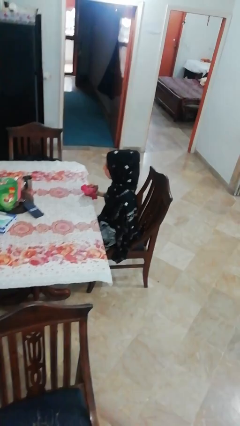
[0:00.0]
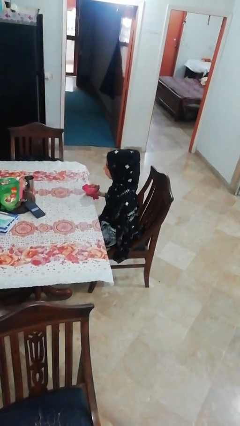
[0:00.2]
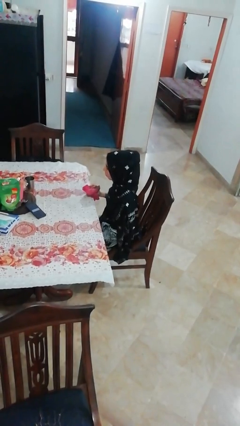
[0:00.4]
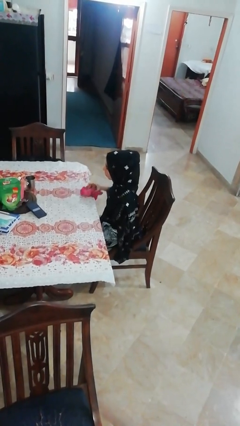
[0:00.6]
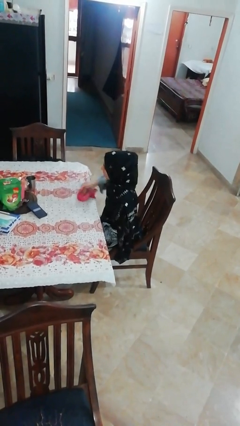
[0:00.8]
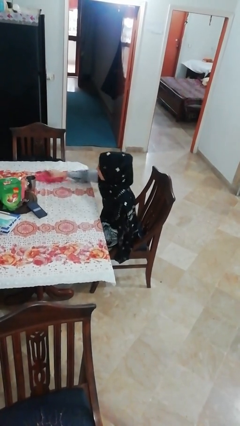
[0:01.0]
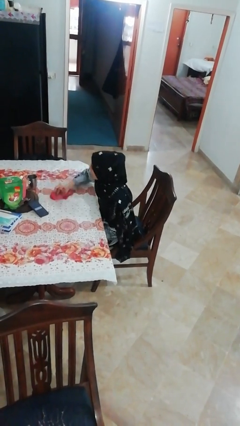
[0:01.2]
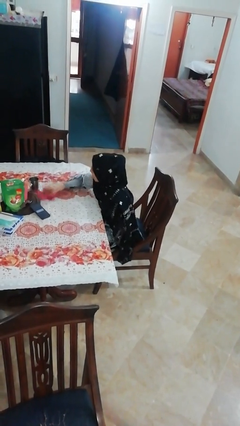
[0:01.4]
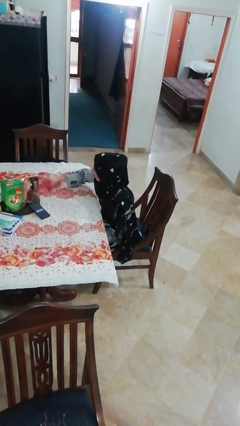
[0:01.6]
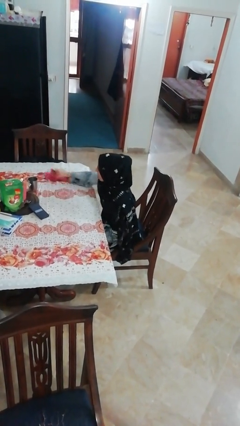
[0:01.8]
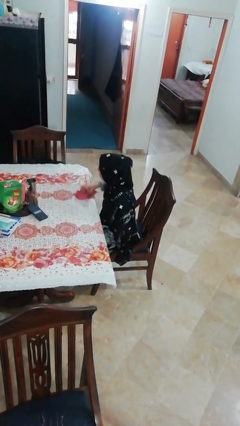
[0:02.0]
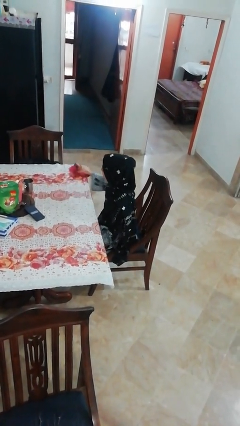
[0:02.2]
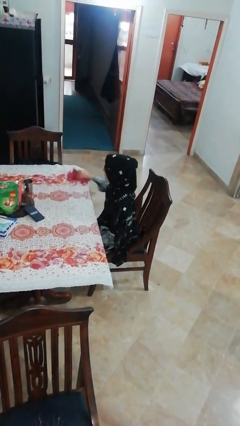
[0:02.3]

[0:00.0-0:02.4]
person cleans table with rag

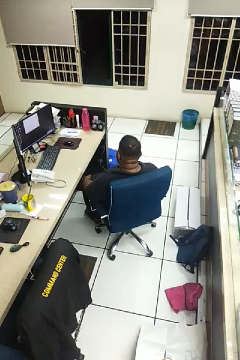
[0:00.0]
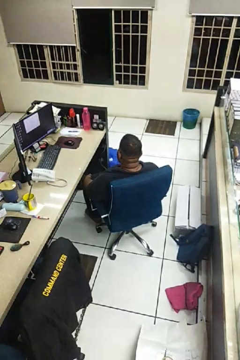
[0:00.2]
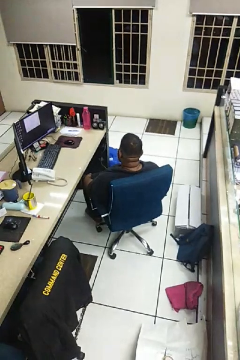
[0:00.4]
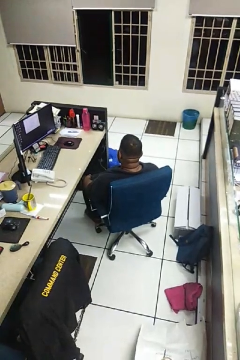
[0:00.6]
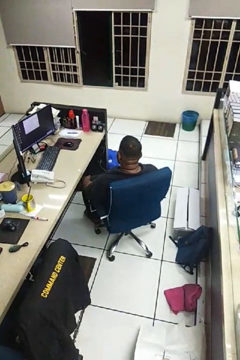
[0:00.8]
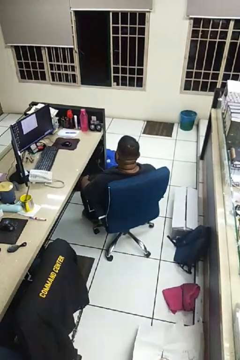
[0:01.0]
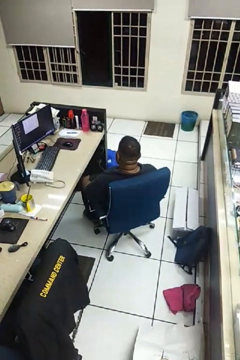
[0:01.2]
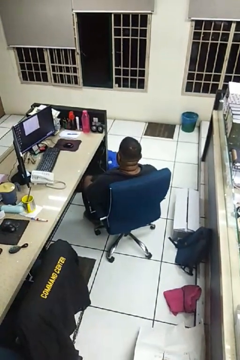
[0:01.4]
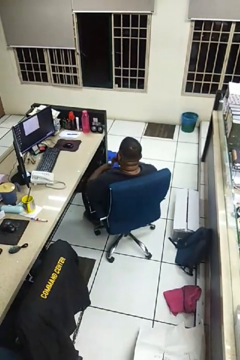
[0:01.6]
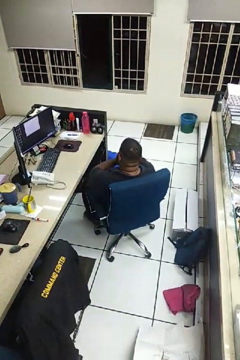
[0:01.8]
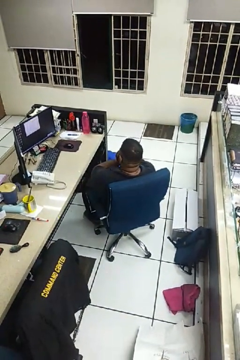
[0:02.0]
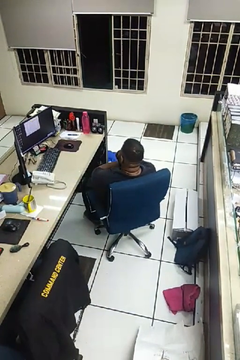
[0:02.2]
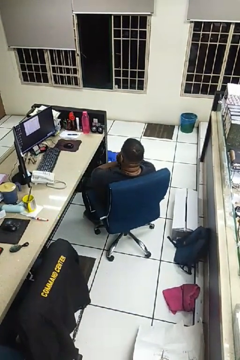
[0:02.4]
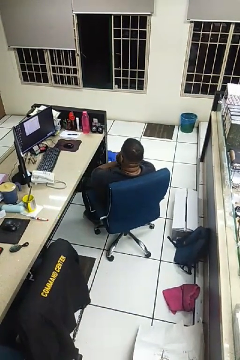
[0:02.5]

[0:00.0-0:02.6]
person strokes chin

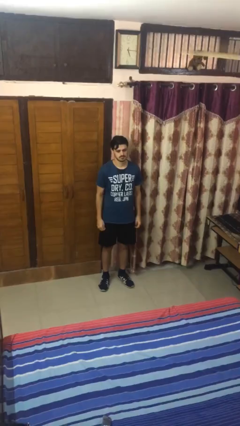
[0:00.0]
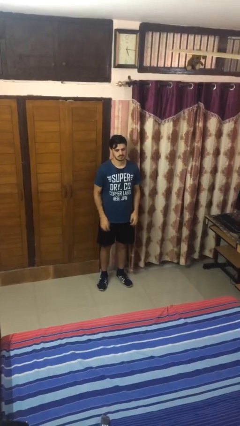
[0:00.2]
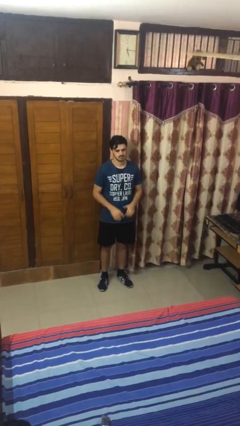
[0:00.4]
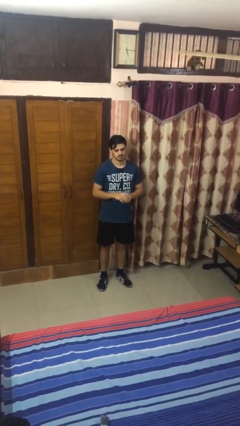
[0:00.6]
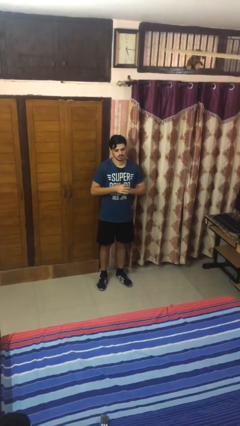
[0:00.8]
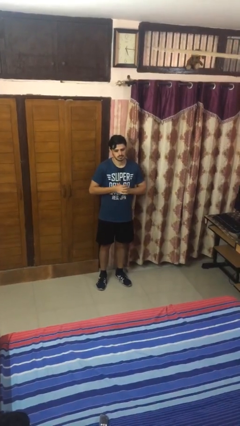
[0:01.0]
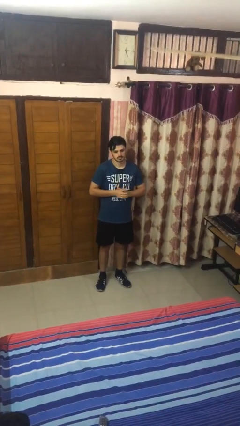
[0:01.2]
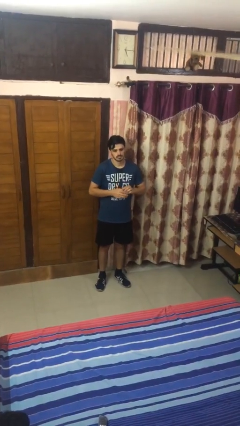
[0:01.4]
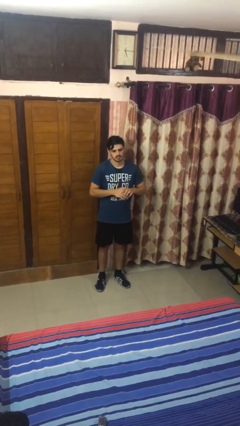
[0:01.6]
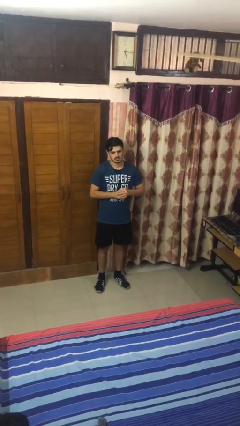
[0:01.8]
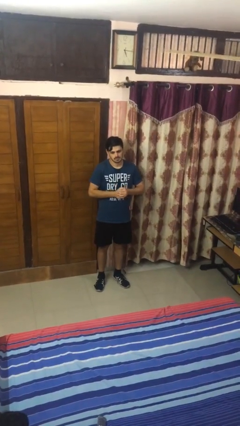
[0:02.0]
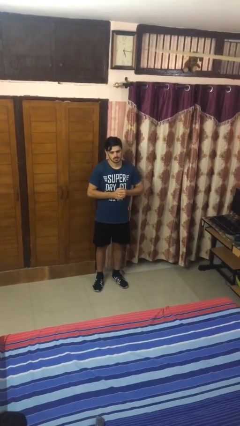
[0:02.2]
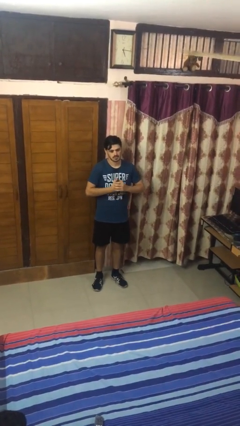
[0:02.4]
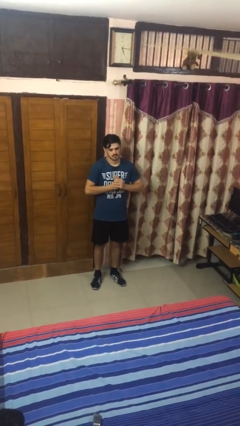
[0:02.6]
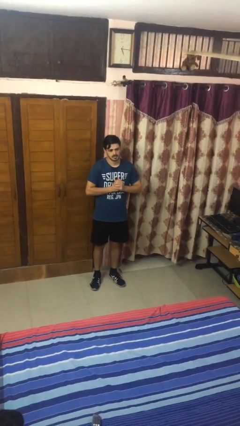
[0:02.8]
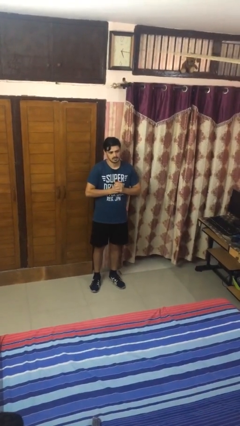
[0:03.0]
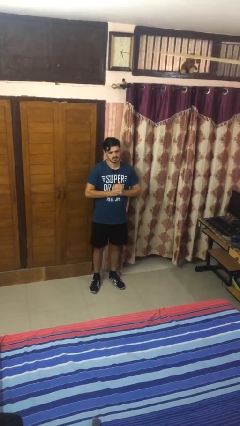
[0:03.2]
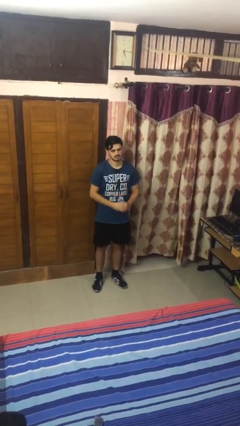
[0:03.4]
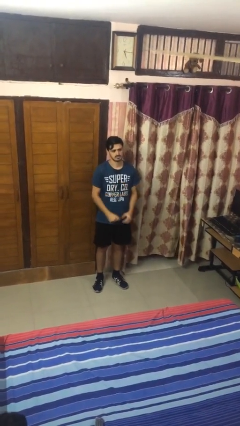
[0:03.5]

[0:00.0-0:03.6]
person cracks knuckles

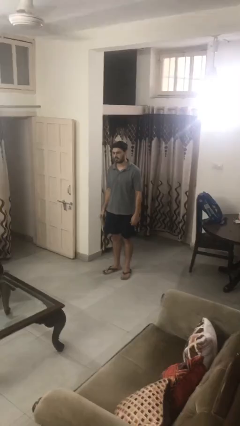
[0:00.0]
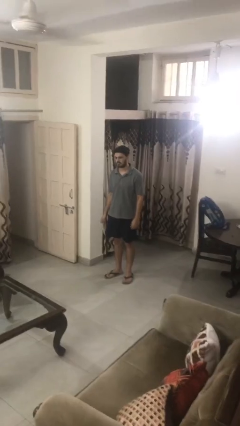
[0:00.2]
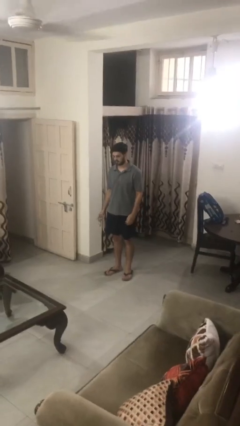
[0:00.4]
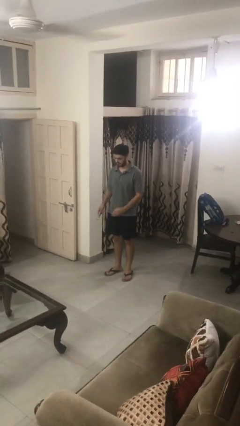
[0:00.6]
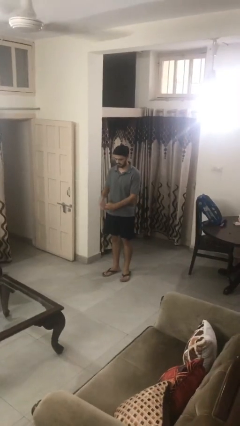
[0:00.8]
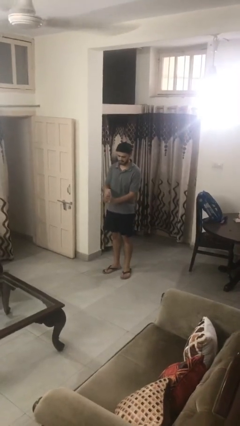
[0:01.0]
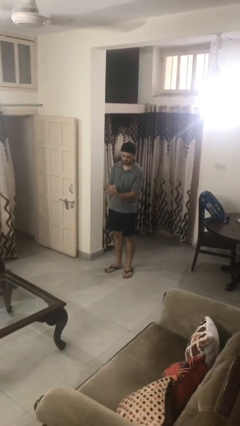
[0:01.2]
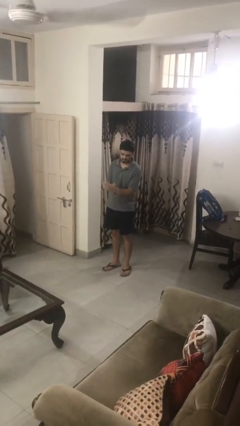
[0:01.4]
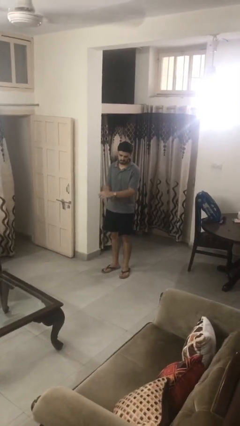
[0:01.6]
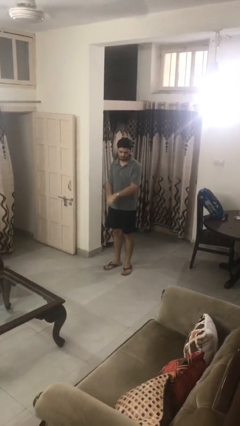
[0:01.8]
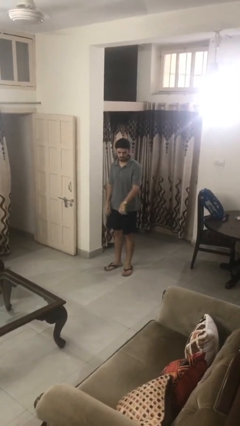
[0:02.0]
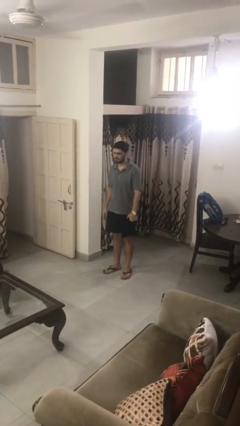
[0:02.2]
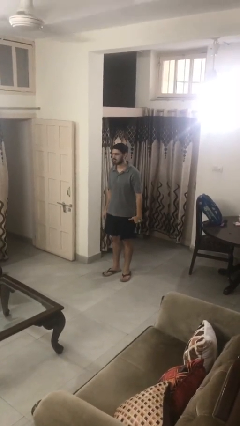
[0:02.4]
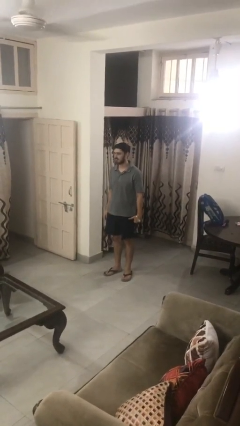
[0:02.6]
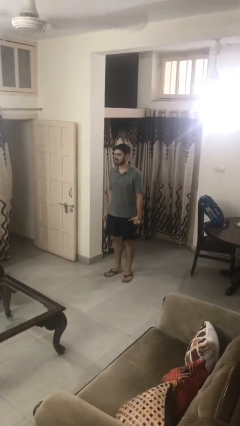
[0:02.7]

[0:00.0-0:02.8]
person puts on wristwatch

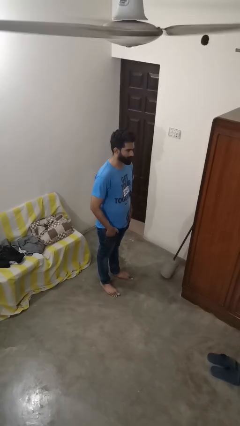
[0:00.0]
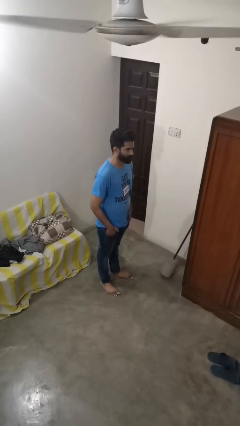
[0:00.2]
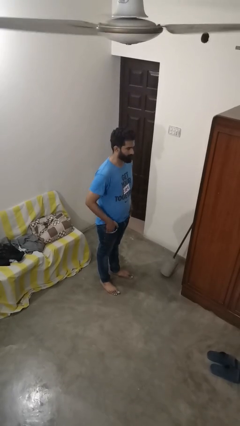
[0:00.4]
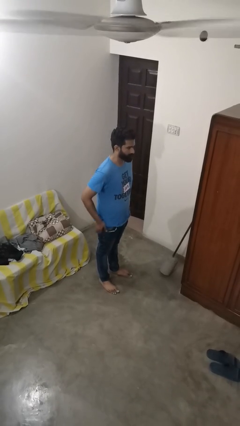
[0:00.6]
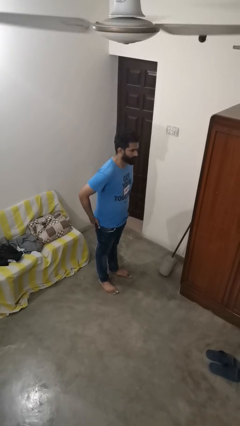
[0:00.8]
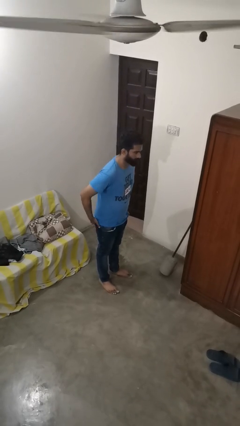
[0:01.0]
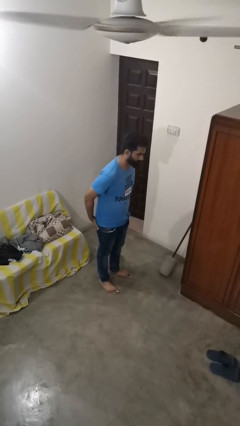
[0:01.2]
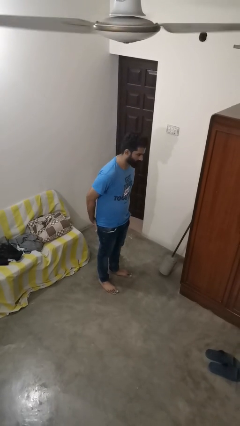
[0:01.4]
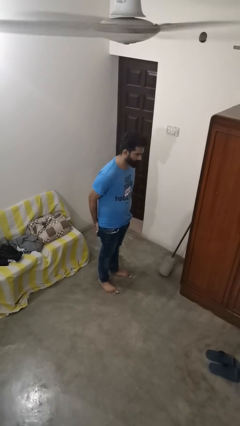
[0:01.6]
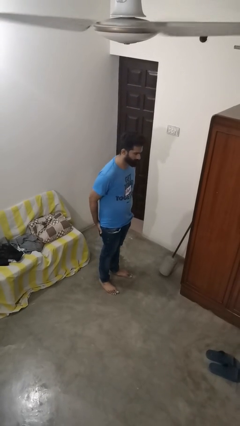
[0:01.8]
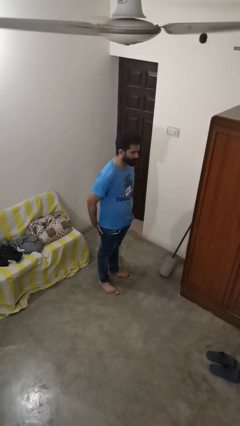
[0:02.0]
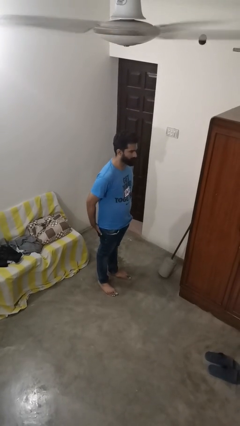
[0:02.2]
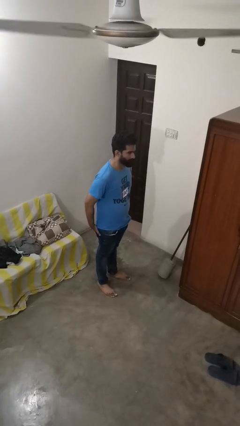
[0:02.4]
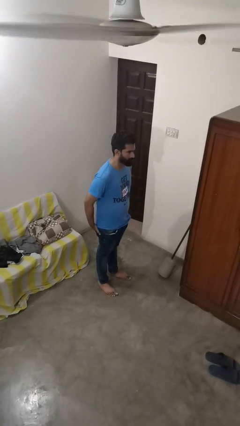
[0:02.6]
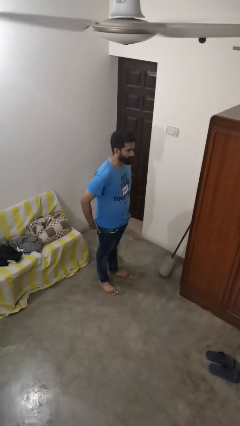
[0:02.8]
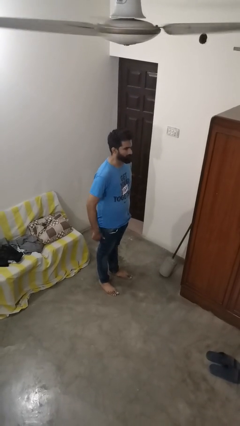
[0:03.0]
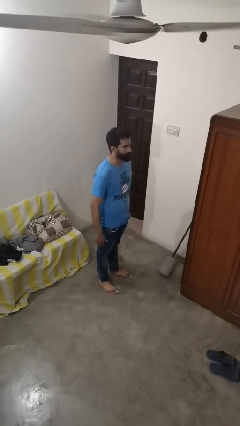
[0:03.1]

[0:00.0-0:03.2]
person puts hands in back pockets

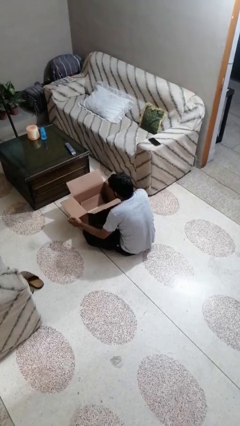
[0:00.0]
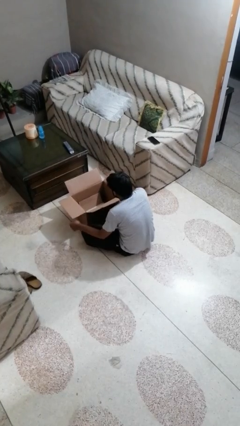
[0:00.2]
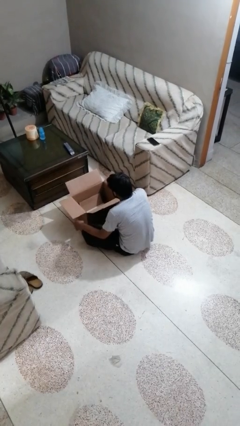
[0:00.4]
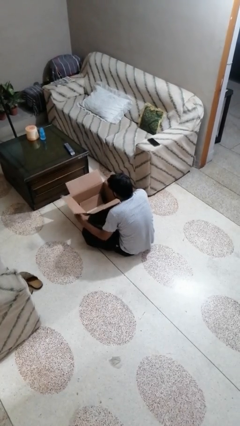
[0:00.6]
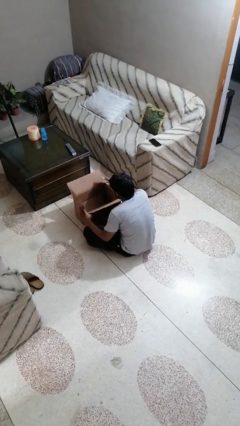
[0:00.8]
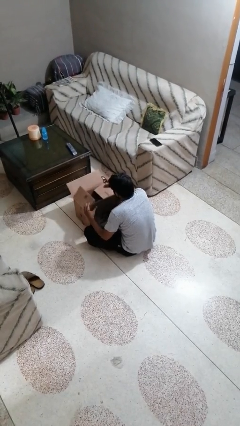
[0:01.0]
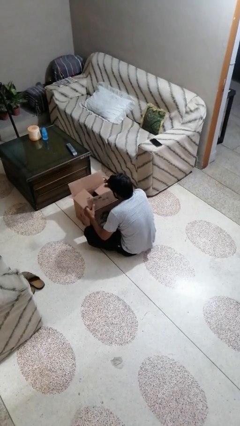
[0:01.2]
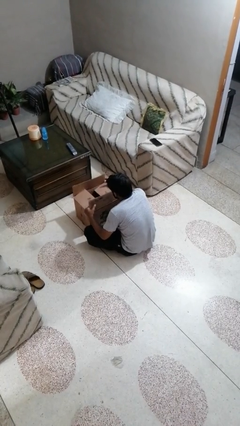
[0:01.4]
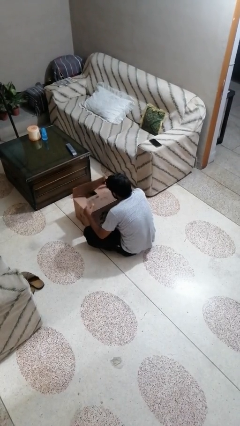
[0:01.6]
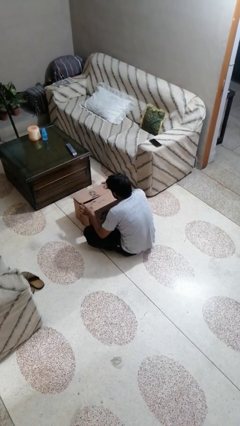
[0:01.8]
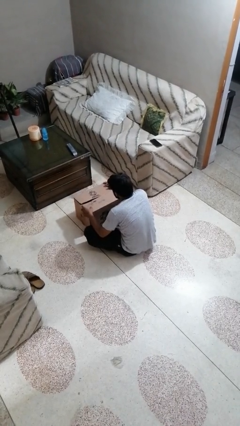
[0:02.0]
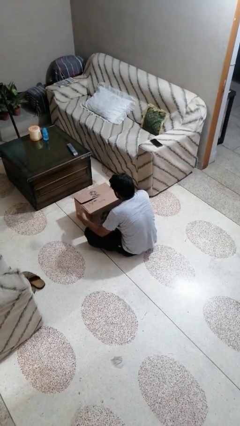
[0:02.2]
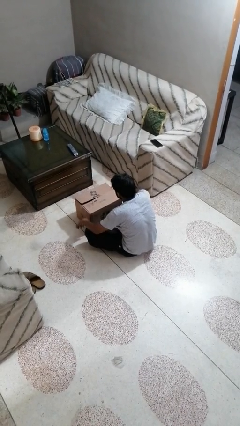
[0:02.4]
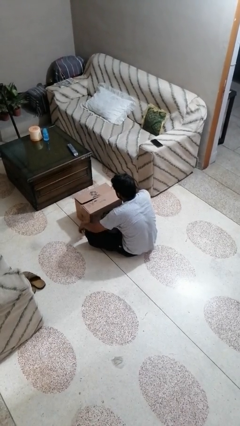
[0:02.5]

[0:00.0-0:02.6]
person closes box

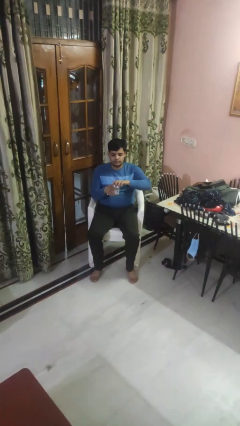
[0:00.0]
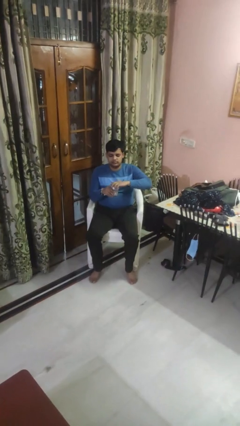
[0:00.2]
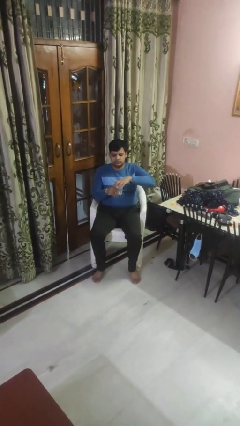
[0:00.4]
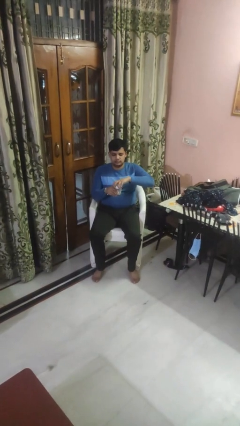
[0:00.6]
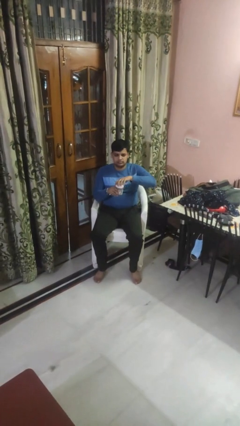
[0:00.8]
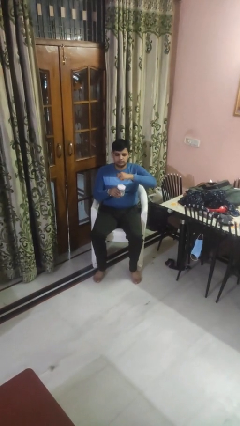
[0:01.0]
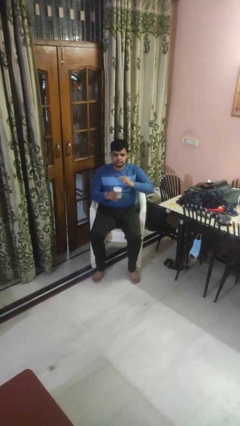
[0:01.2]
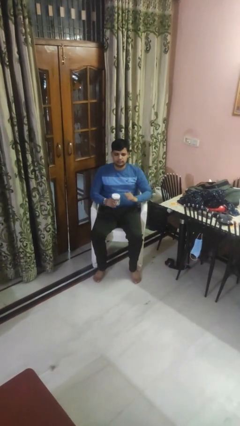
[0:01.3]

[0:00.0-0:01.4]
person closes jar
